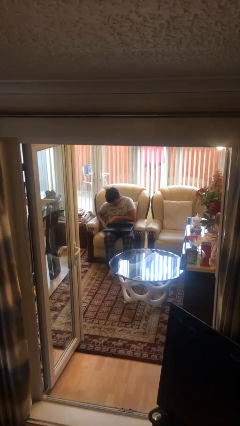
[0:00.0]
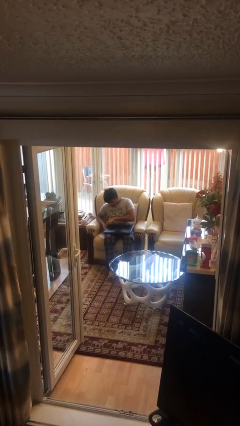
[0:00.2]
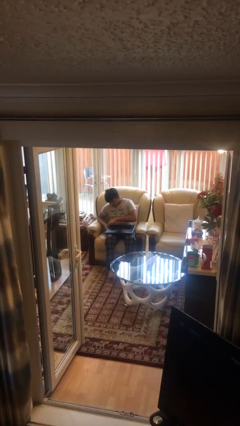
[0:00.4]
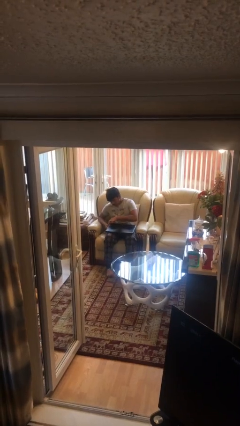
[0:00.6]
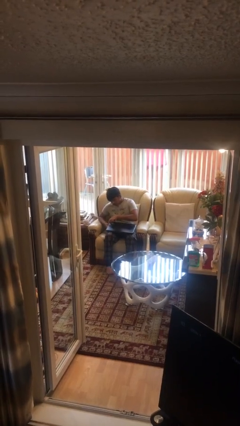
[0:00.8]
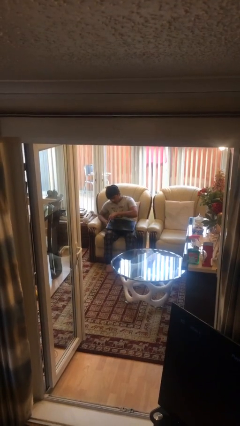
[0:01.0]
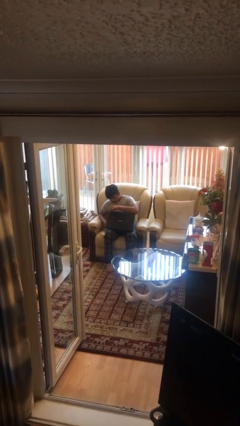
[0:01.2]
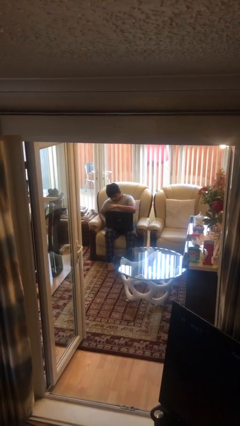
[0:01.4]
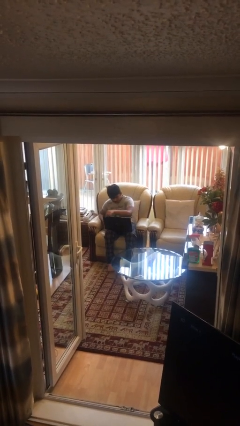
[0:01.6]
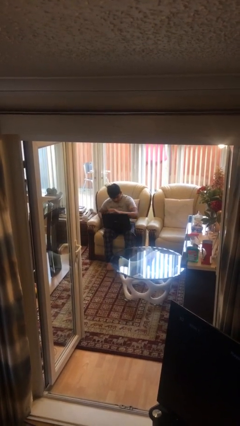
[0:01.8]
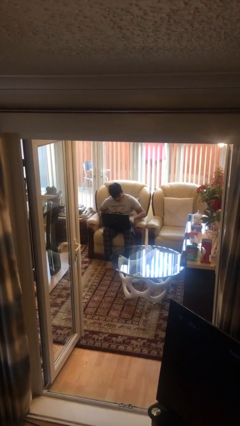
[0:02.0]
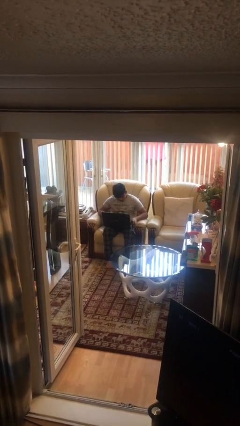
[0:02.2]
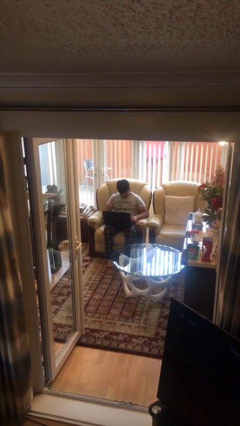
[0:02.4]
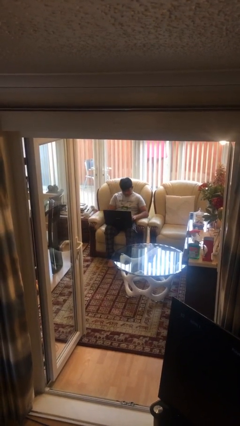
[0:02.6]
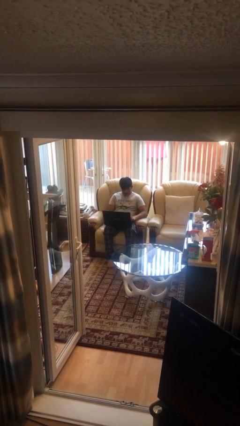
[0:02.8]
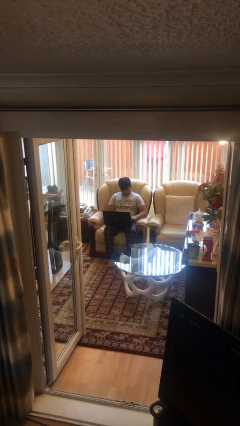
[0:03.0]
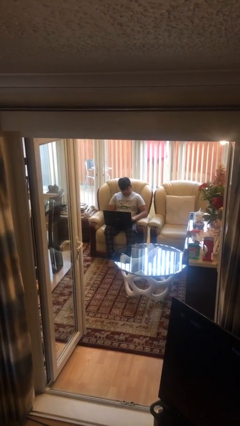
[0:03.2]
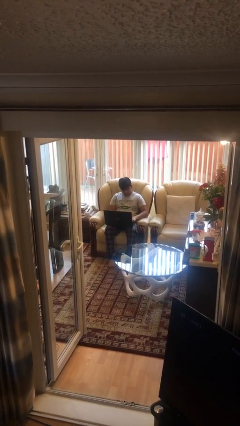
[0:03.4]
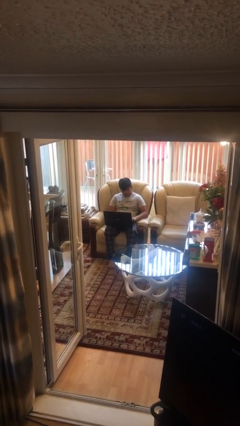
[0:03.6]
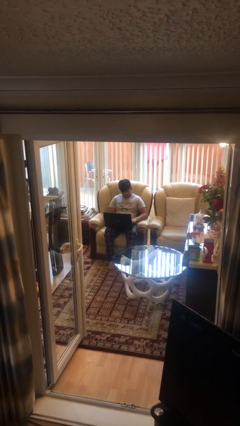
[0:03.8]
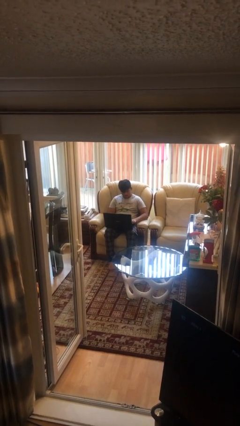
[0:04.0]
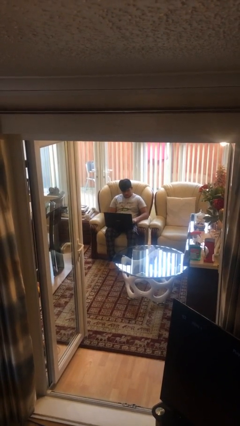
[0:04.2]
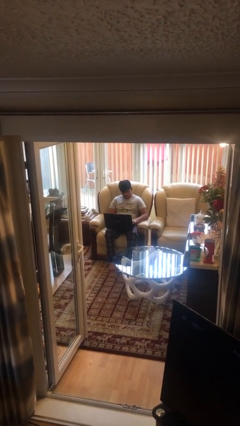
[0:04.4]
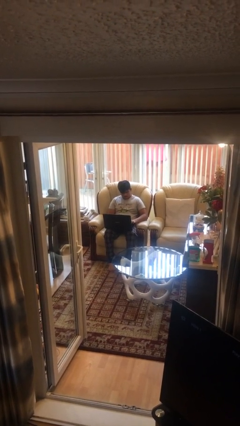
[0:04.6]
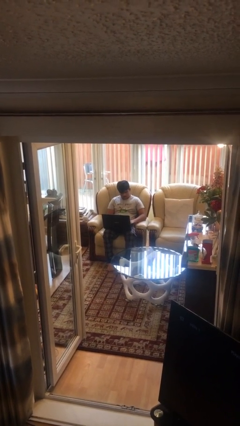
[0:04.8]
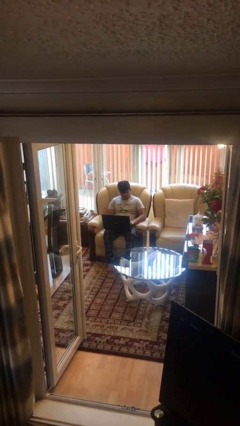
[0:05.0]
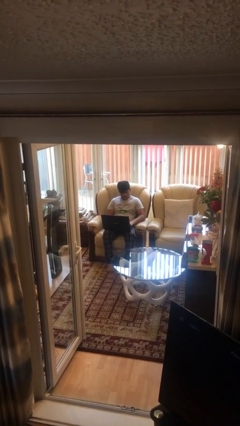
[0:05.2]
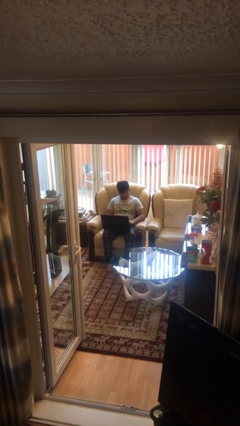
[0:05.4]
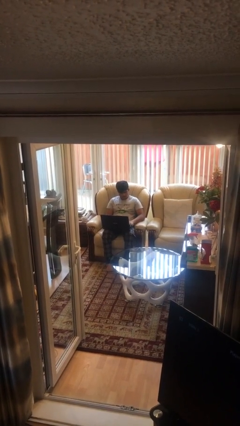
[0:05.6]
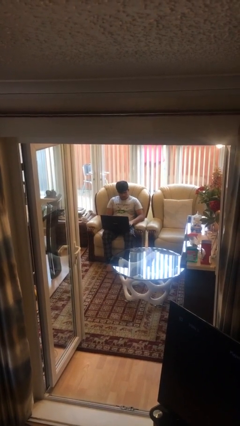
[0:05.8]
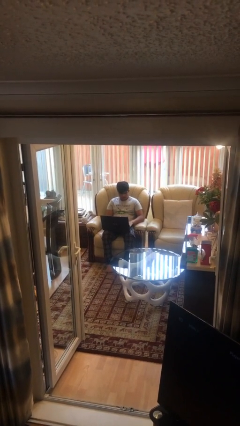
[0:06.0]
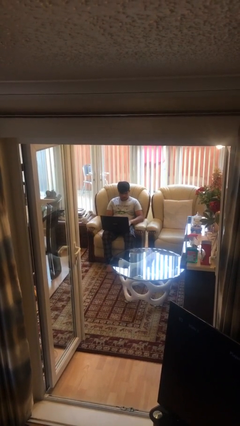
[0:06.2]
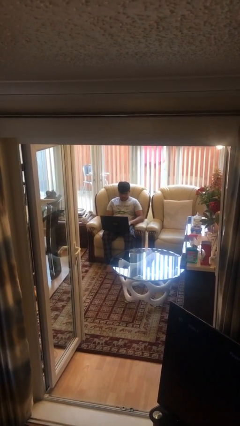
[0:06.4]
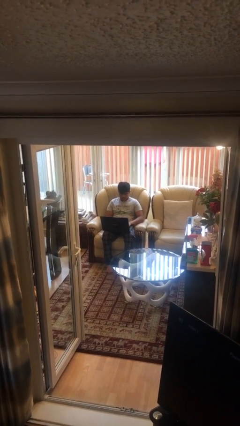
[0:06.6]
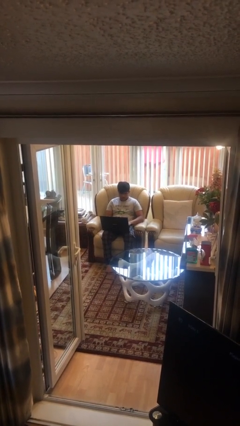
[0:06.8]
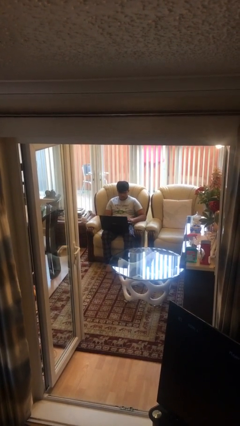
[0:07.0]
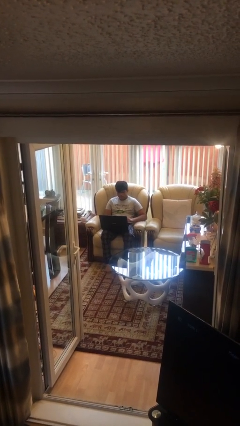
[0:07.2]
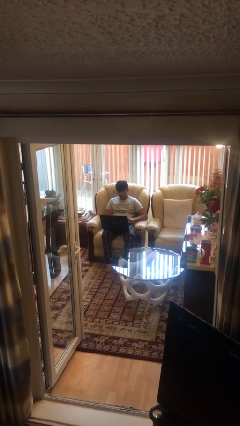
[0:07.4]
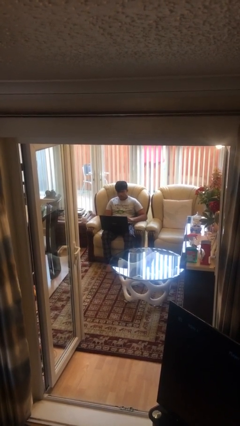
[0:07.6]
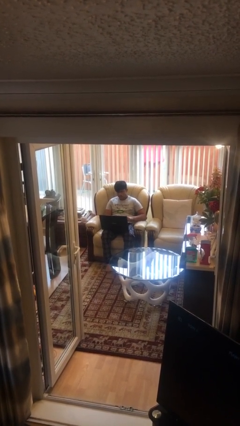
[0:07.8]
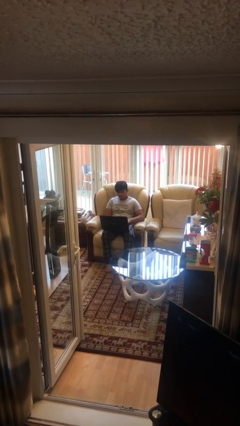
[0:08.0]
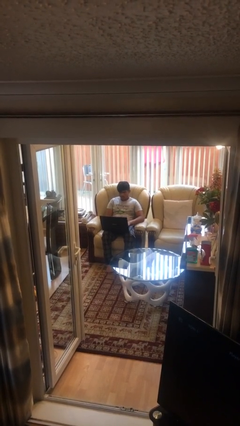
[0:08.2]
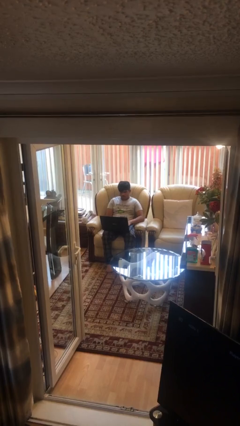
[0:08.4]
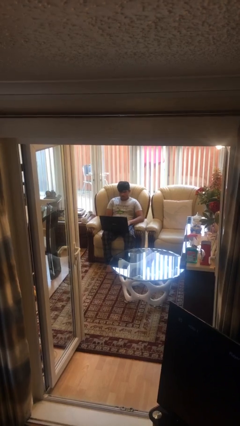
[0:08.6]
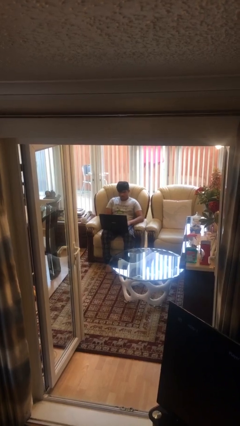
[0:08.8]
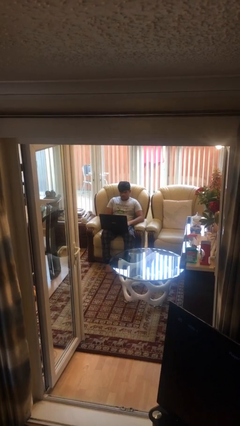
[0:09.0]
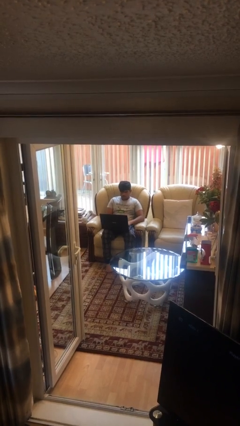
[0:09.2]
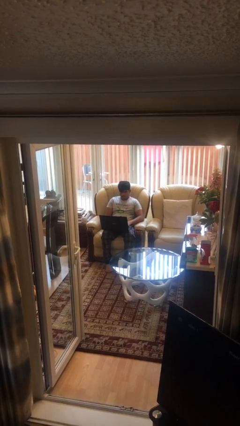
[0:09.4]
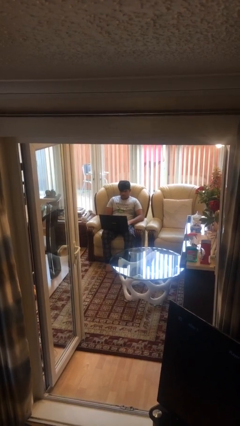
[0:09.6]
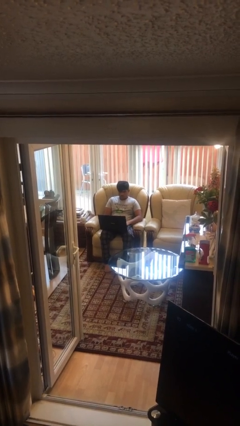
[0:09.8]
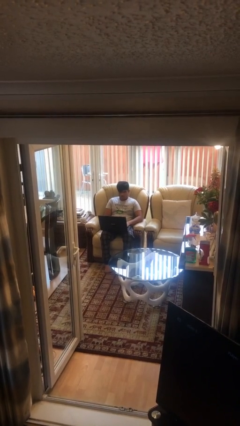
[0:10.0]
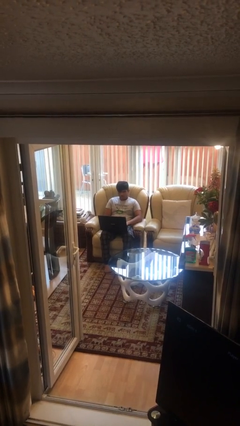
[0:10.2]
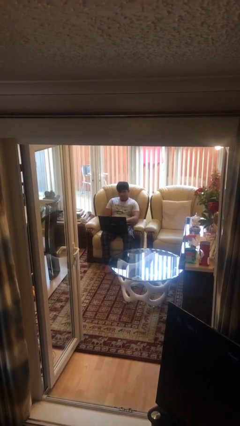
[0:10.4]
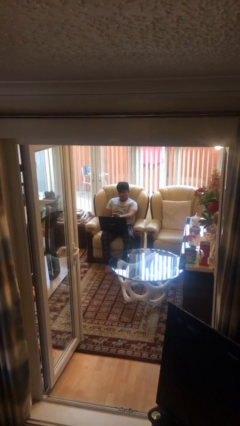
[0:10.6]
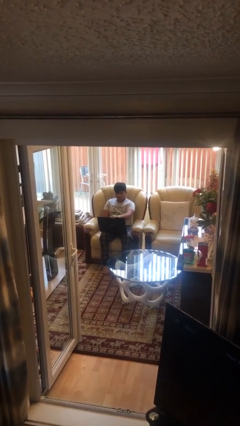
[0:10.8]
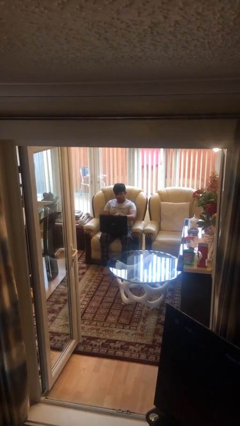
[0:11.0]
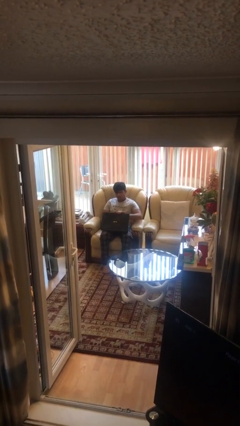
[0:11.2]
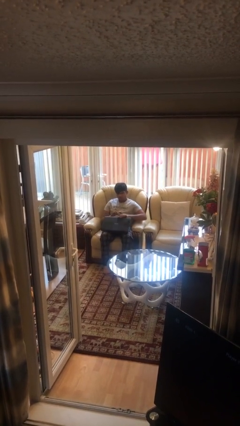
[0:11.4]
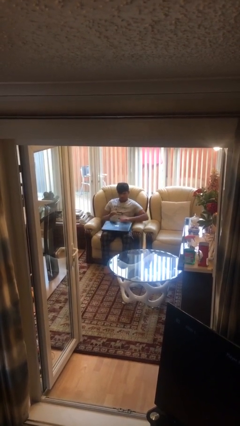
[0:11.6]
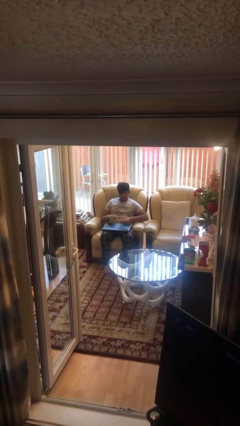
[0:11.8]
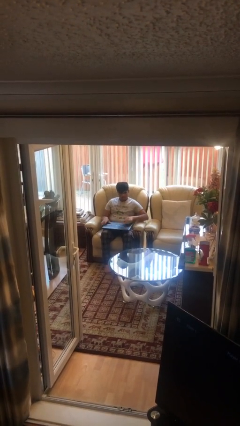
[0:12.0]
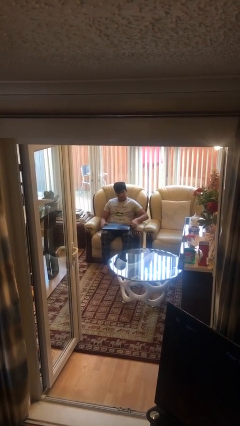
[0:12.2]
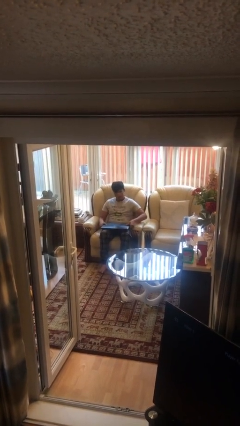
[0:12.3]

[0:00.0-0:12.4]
person interacts with laptop

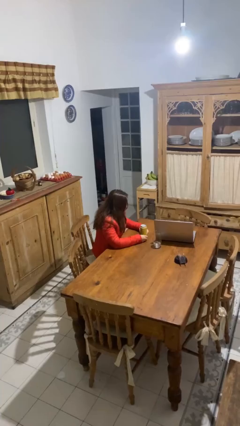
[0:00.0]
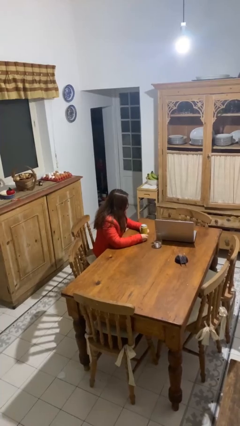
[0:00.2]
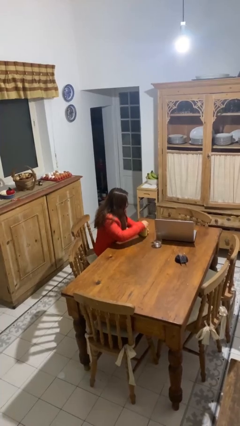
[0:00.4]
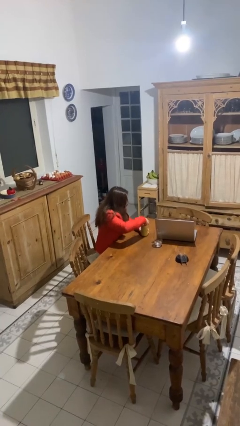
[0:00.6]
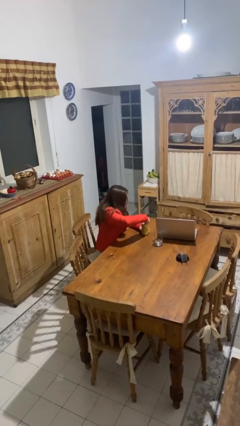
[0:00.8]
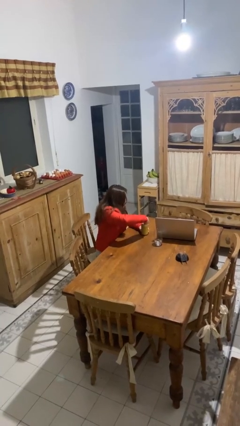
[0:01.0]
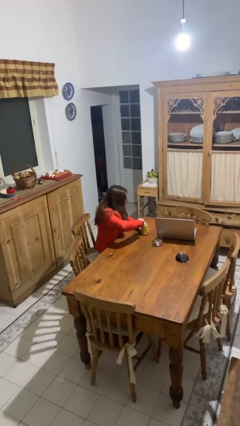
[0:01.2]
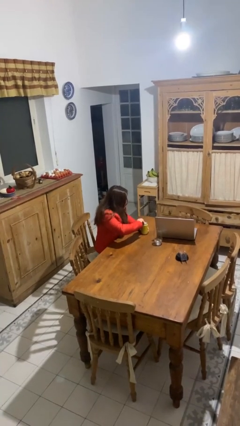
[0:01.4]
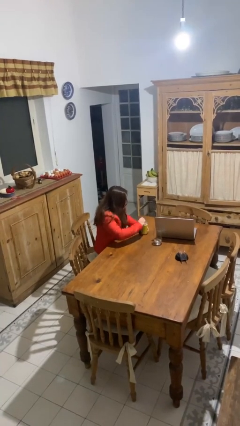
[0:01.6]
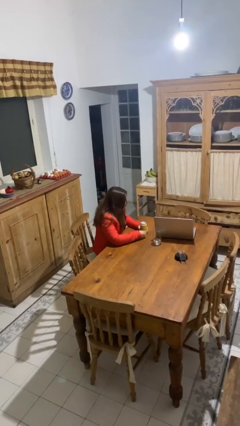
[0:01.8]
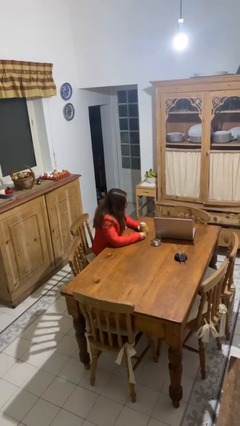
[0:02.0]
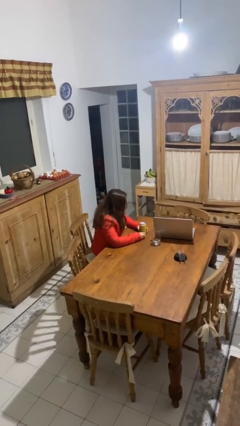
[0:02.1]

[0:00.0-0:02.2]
person opens beverage can

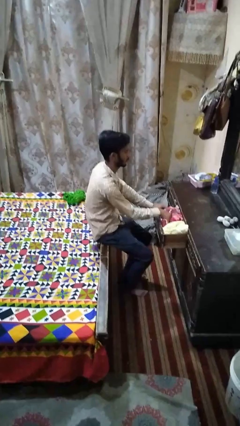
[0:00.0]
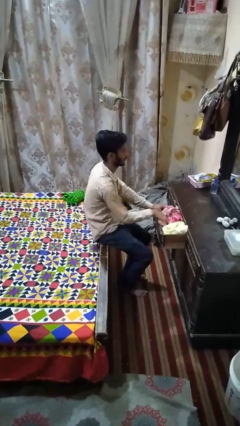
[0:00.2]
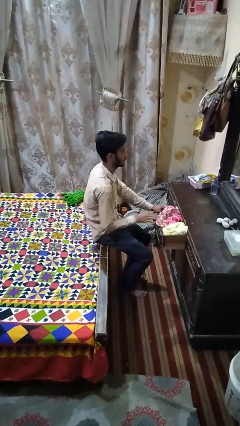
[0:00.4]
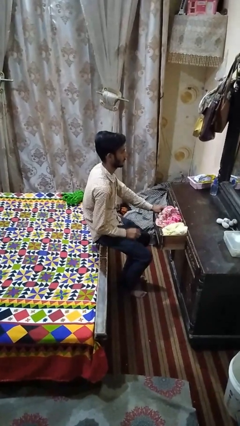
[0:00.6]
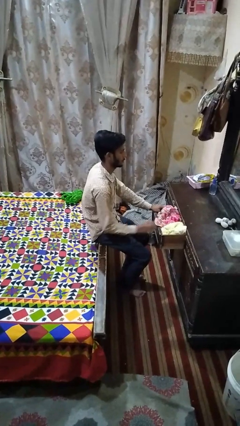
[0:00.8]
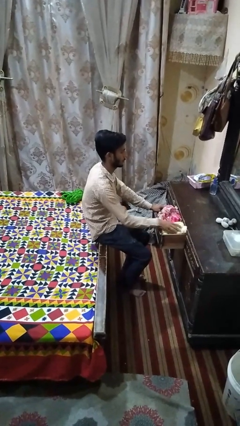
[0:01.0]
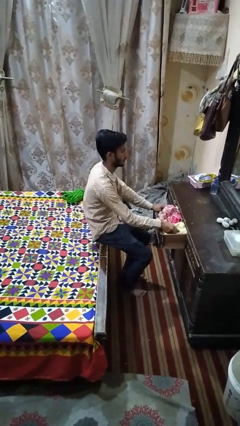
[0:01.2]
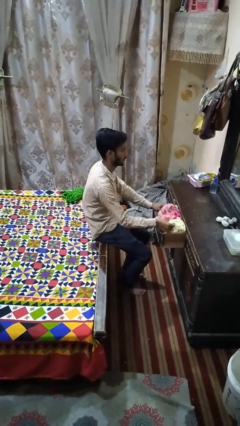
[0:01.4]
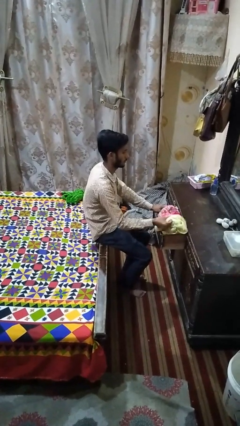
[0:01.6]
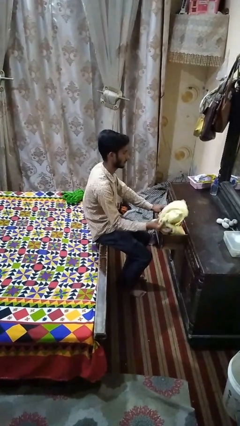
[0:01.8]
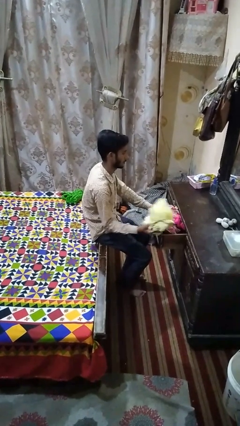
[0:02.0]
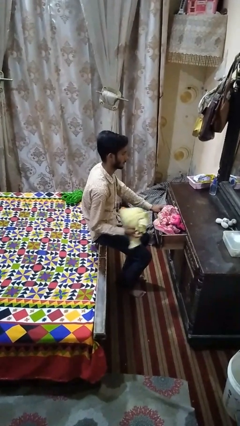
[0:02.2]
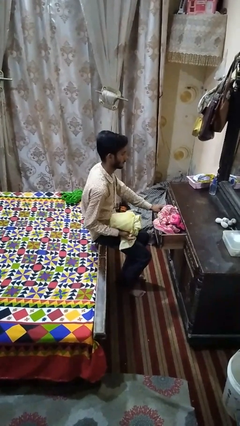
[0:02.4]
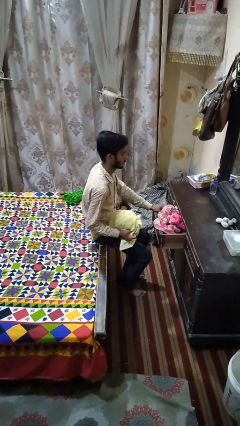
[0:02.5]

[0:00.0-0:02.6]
person takes clothes from dresser

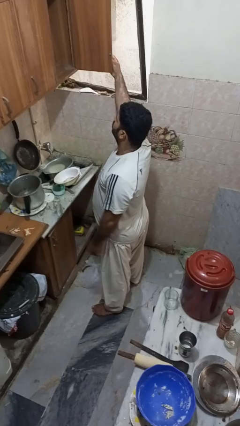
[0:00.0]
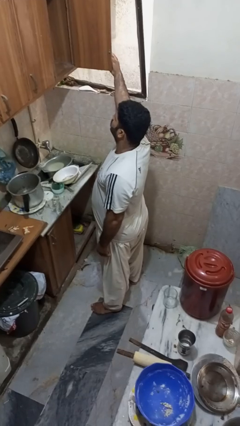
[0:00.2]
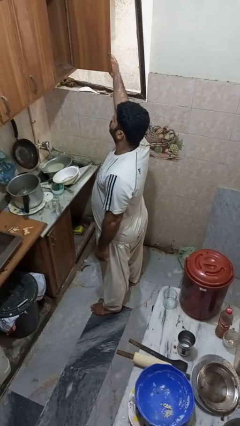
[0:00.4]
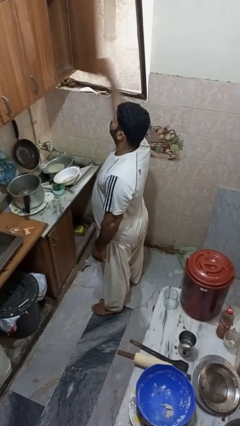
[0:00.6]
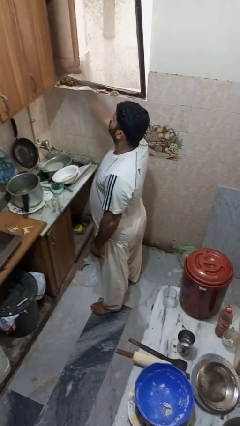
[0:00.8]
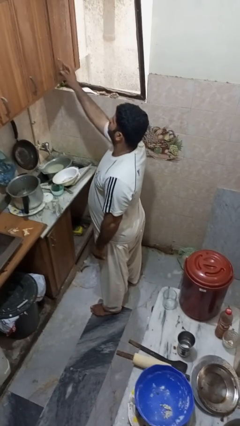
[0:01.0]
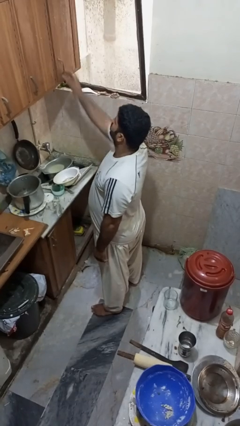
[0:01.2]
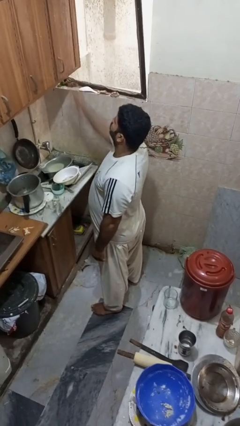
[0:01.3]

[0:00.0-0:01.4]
person closes cabinet
